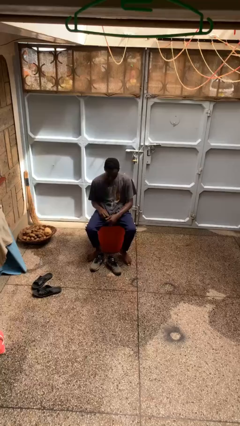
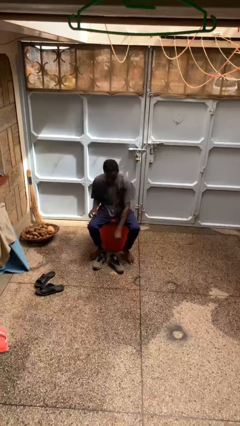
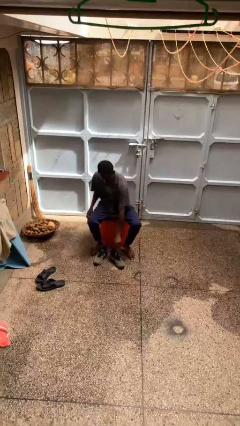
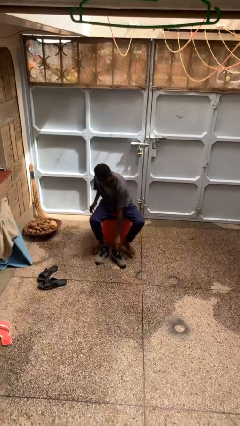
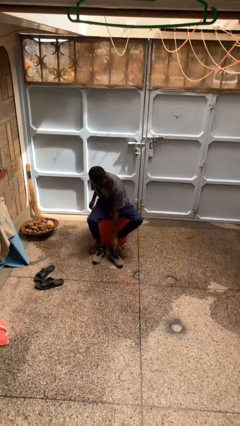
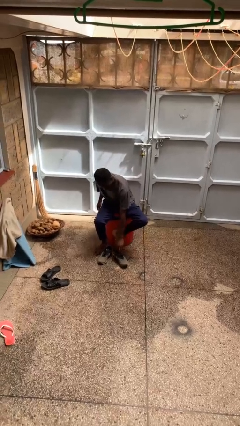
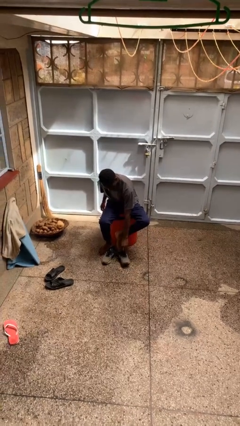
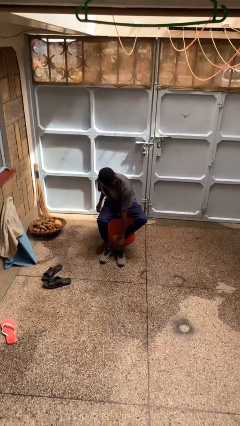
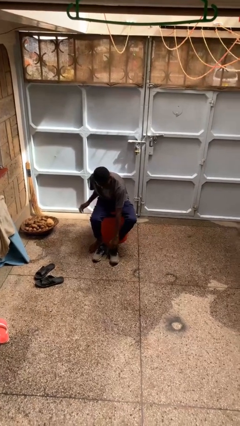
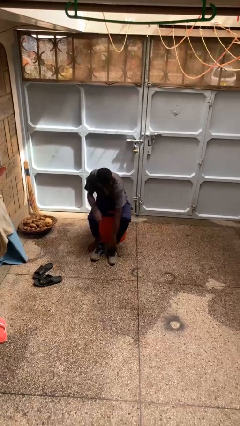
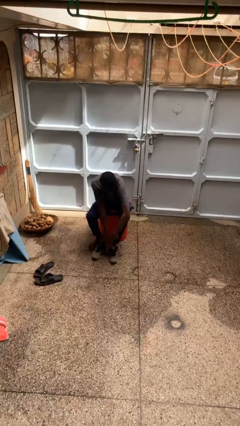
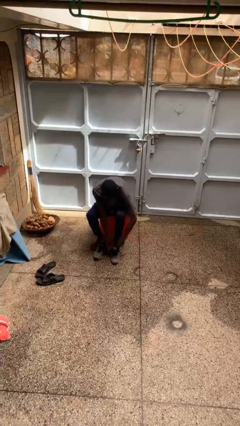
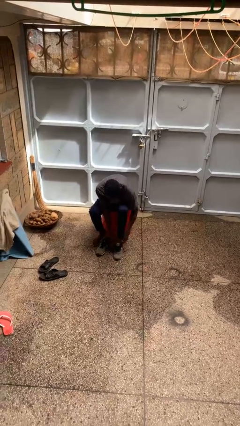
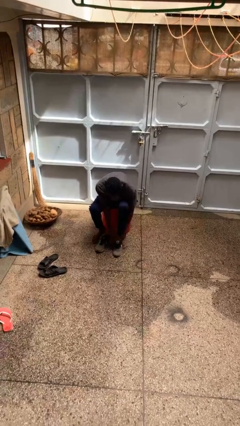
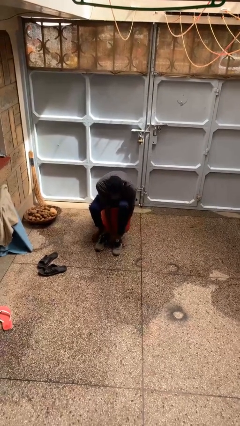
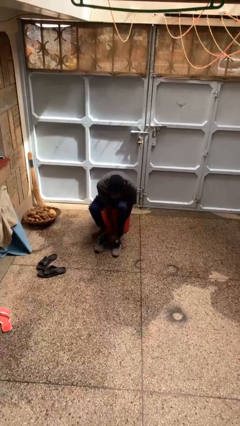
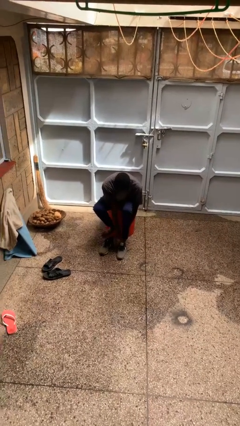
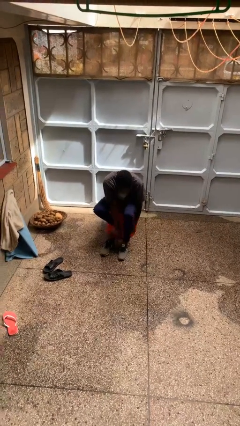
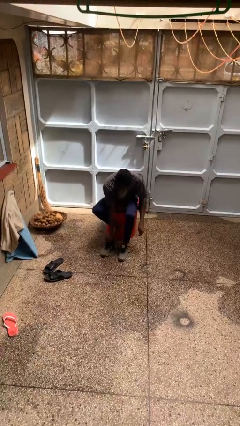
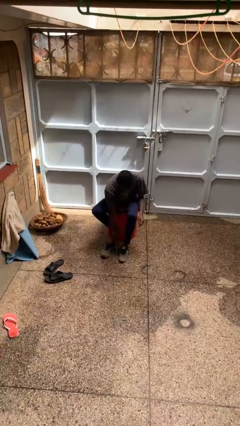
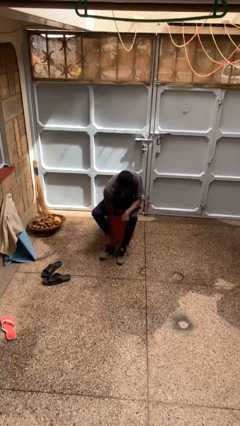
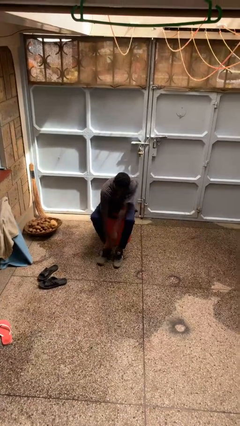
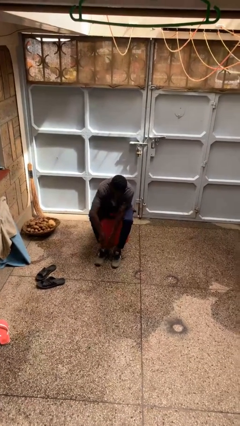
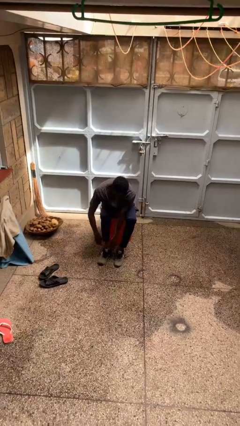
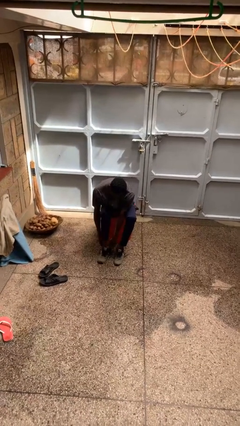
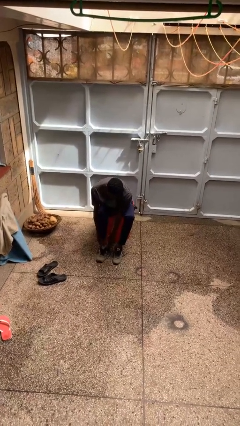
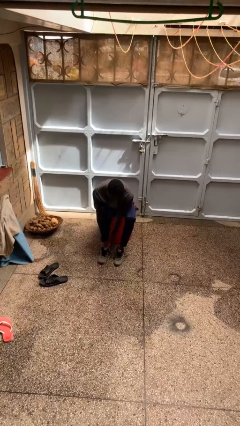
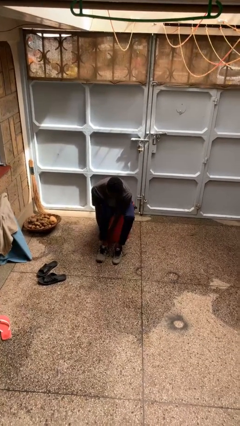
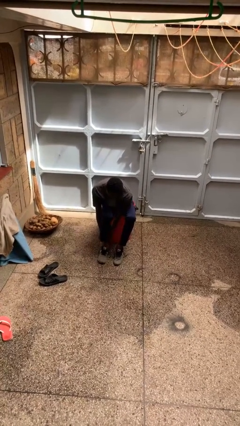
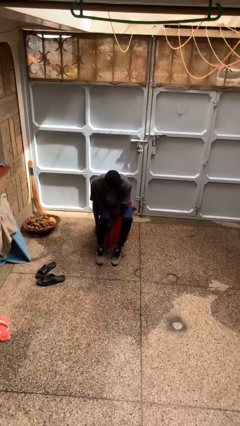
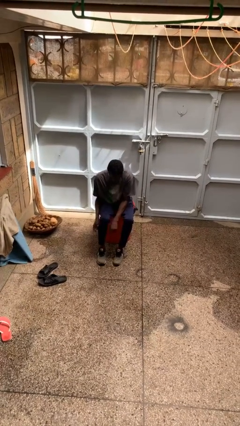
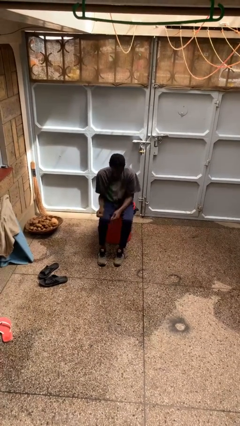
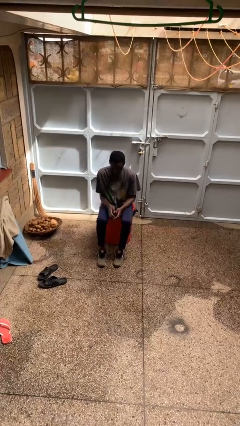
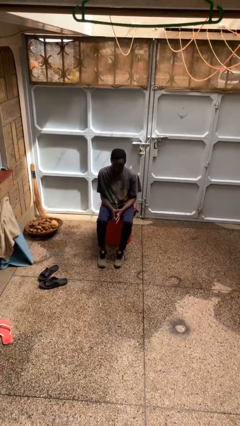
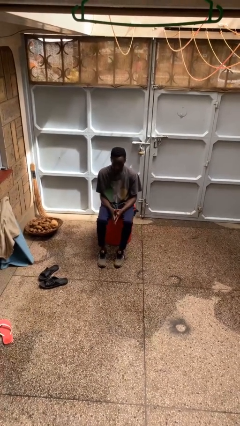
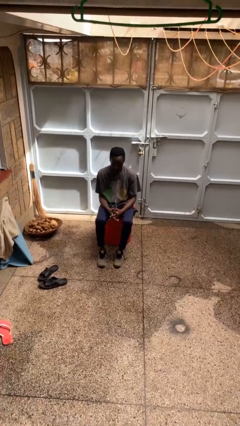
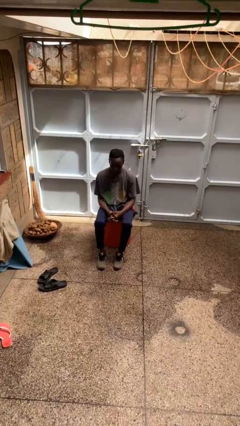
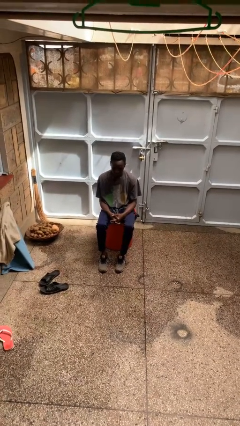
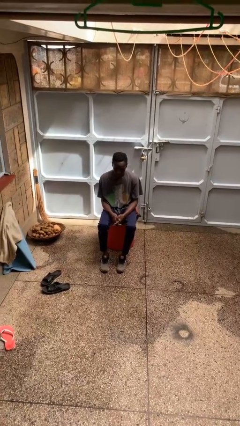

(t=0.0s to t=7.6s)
person puts on shoes

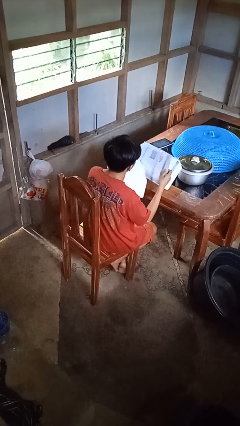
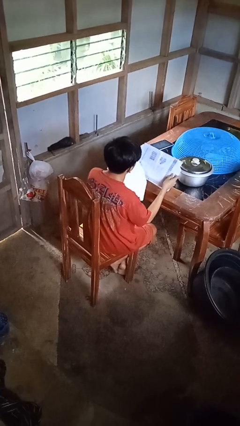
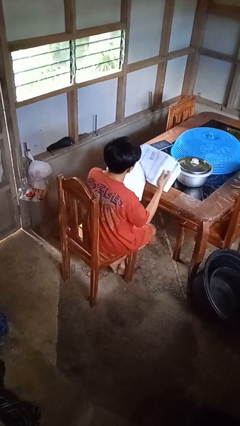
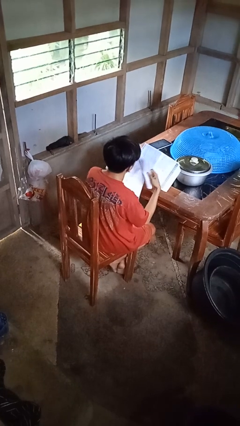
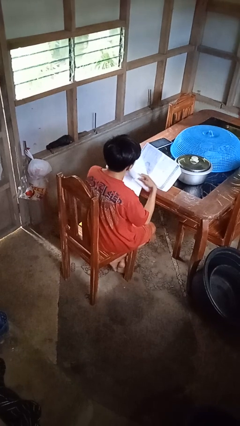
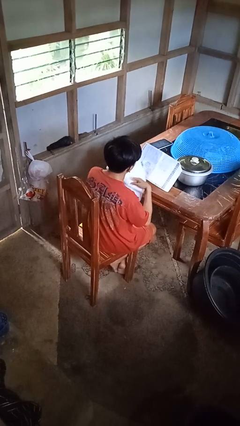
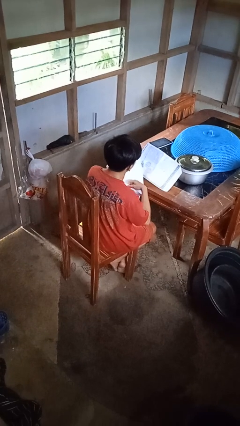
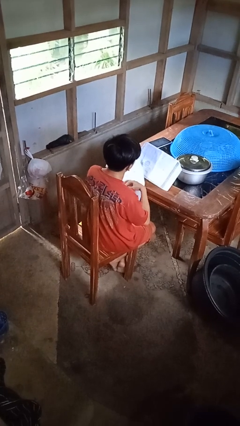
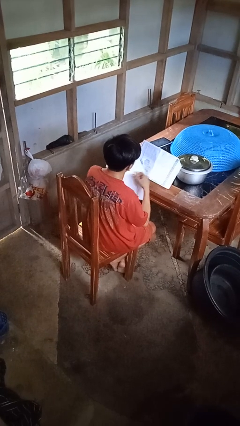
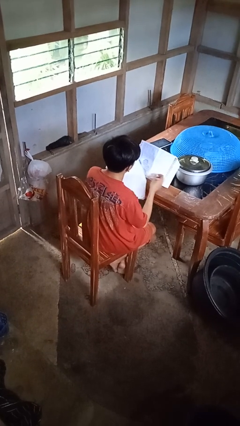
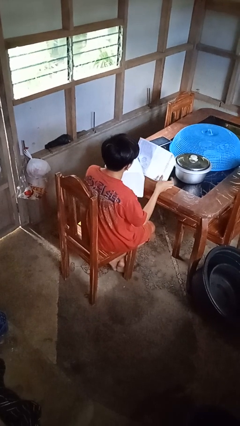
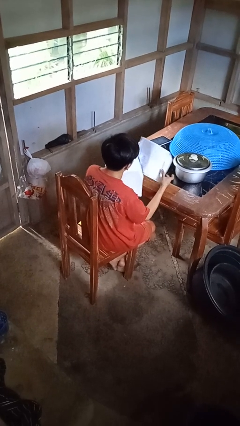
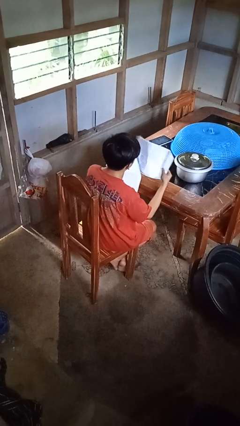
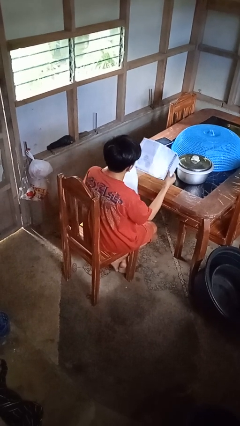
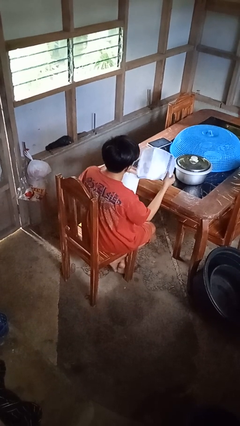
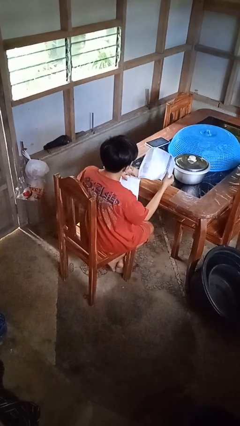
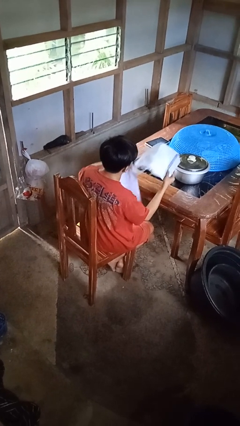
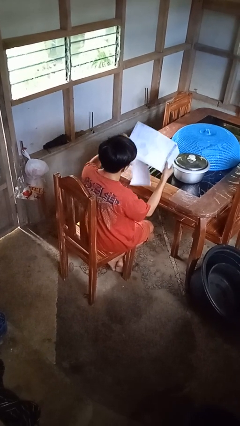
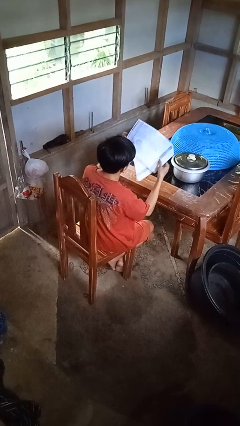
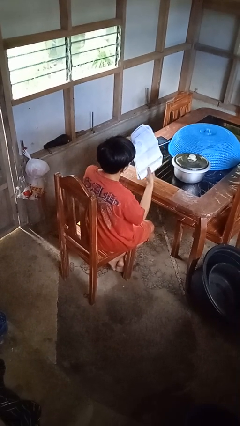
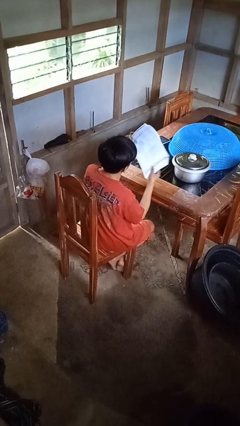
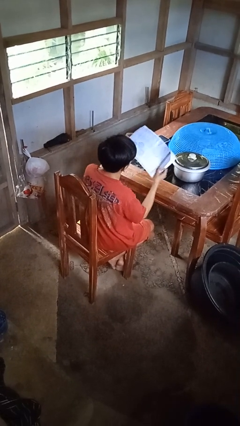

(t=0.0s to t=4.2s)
person reads newspaper

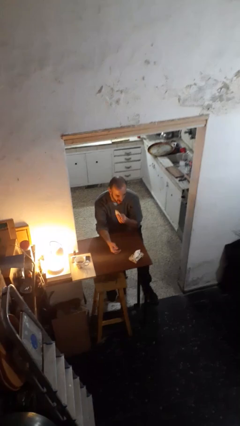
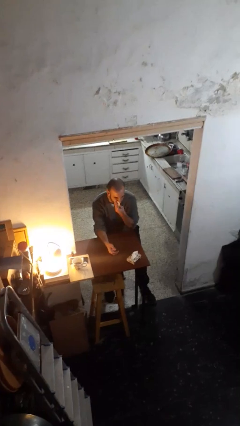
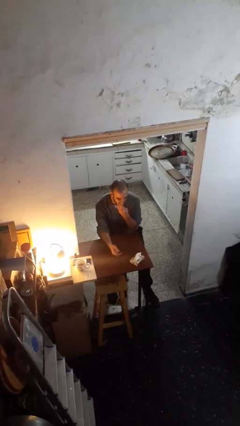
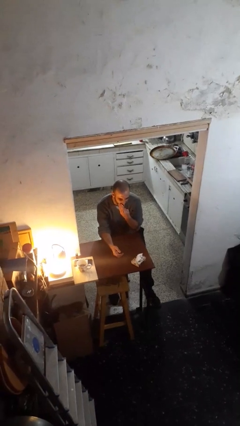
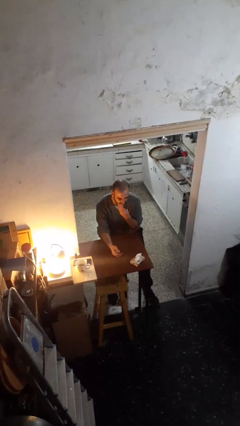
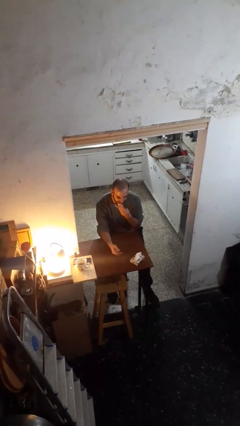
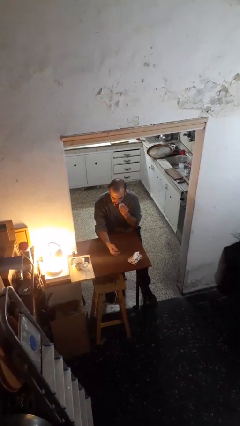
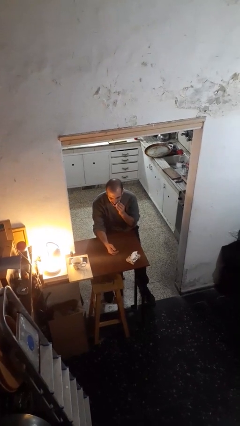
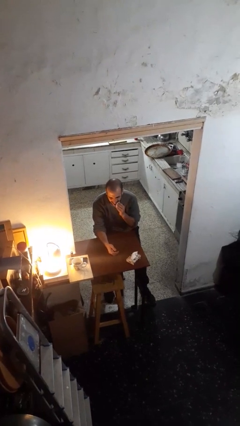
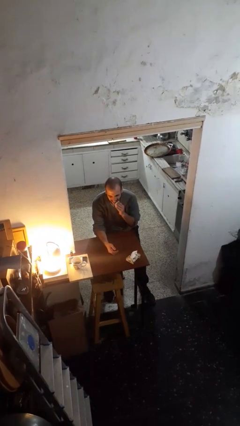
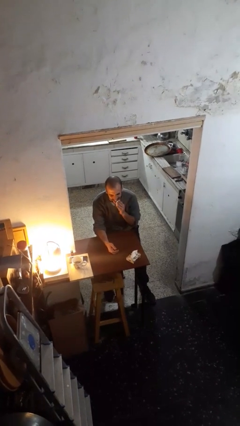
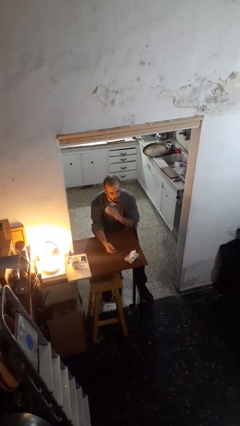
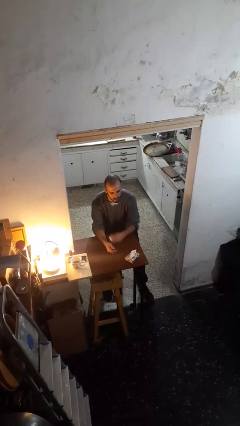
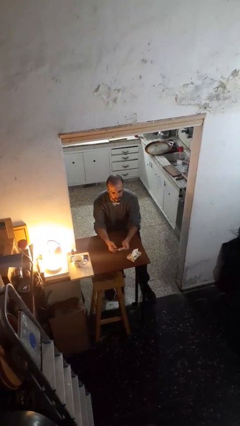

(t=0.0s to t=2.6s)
person wipes mouth with napkin

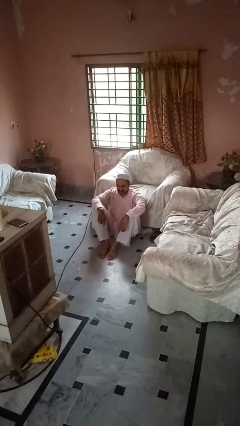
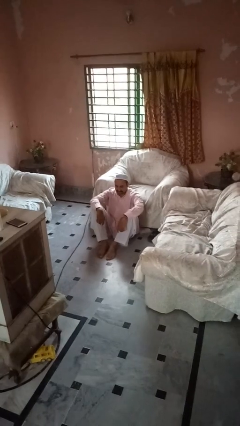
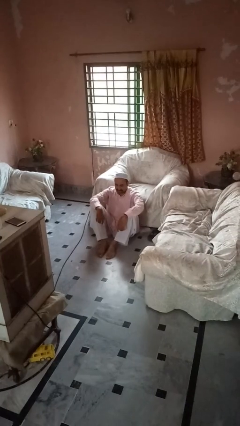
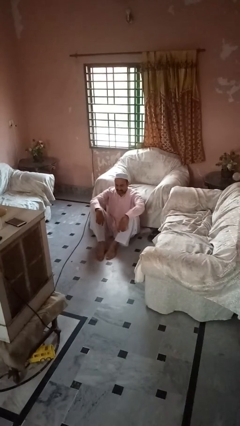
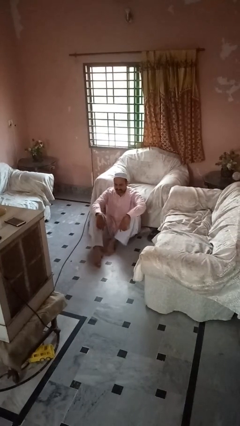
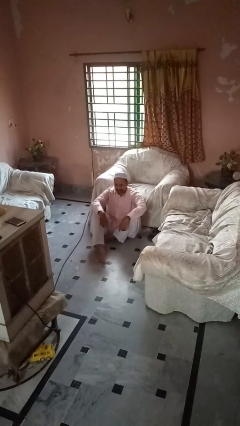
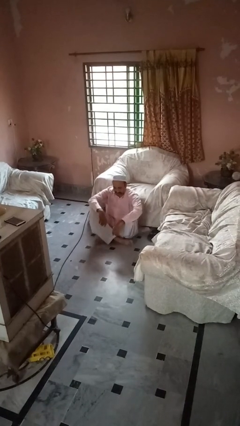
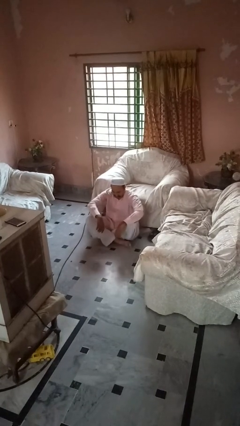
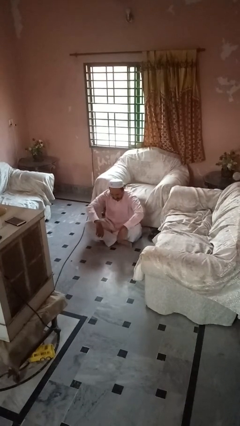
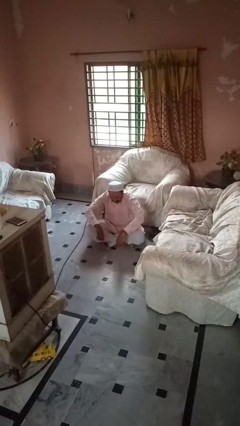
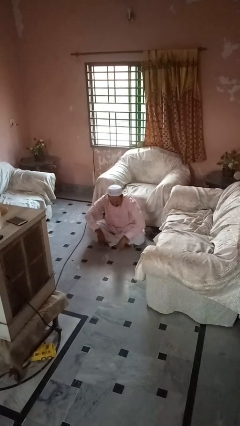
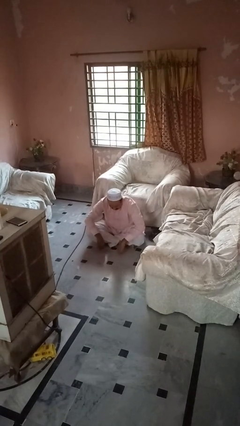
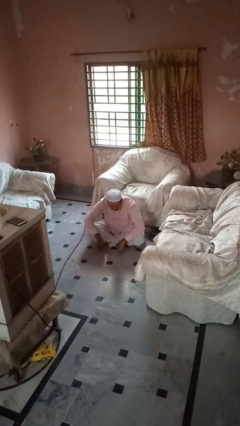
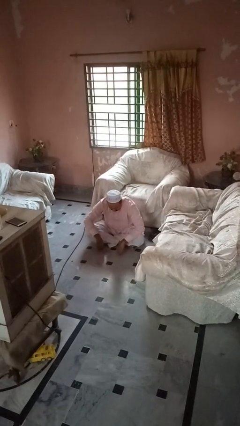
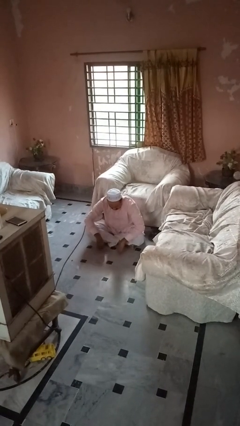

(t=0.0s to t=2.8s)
person crosses legs

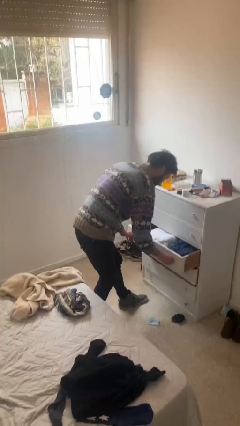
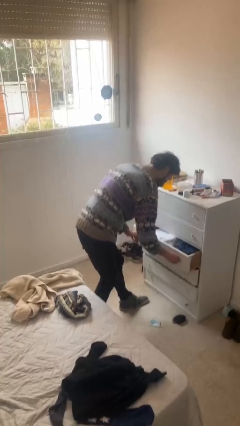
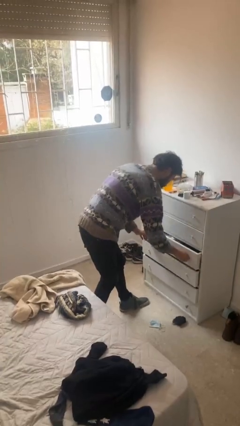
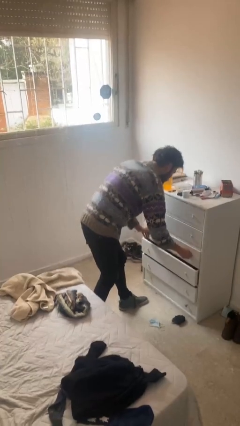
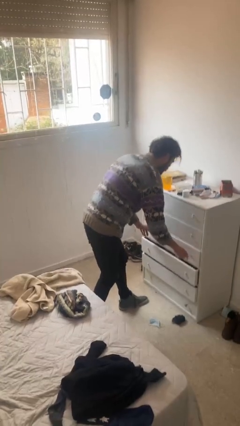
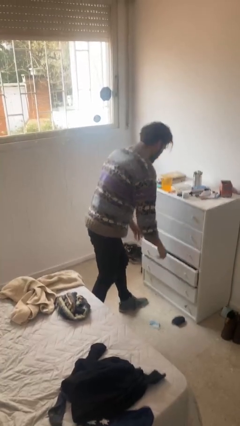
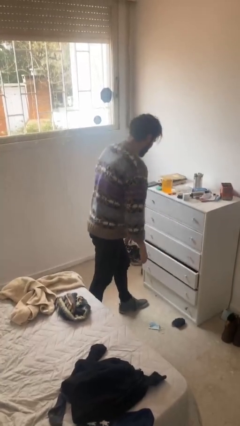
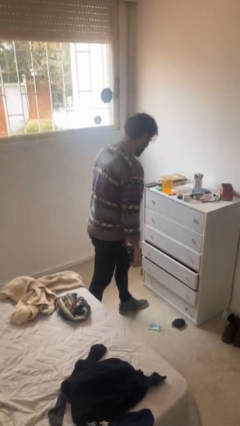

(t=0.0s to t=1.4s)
person closes dresser drawer
